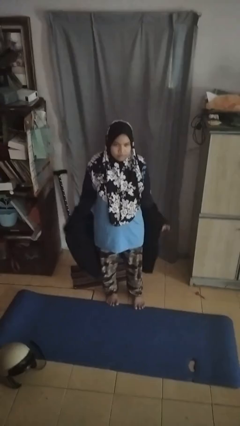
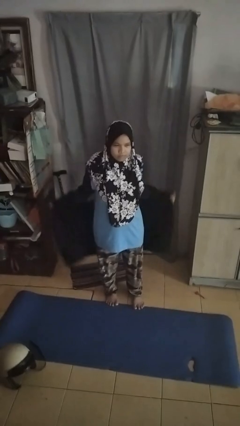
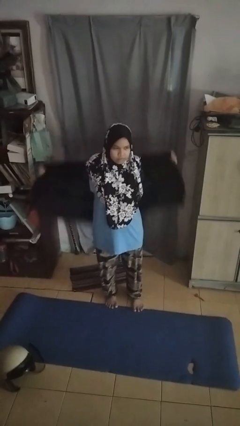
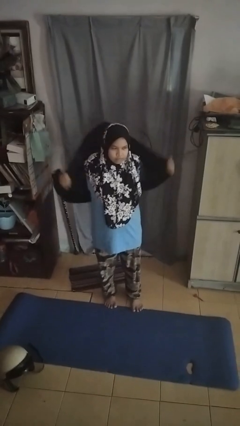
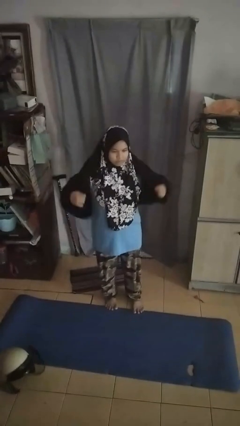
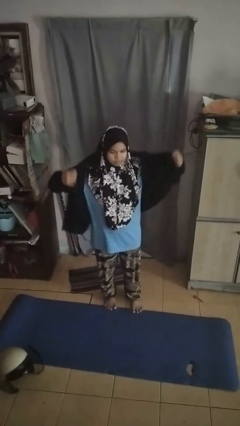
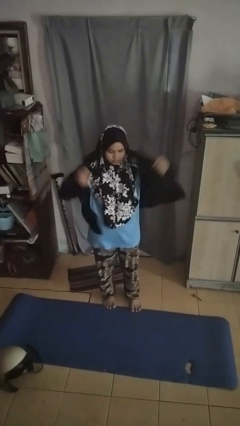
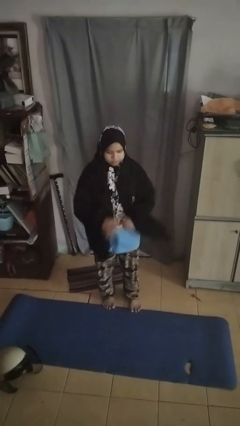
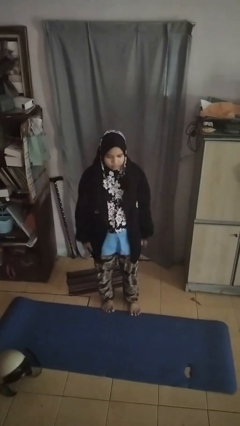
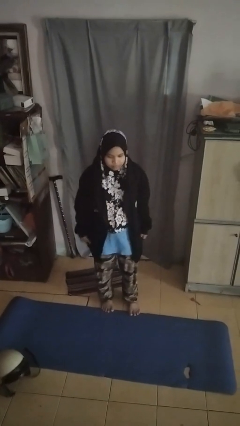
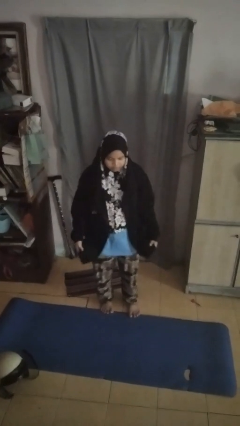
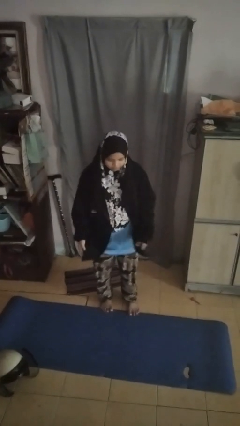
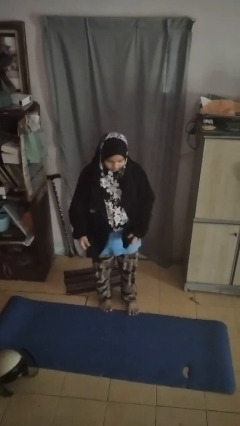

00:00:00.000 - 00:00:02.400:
person puts on jacket

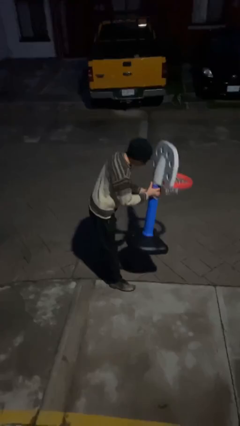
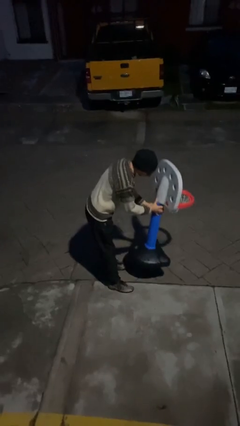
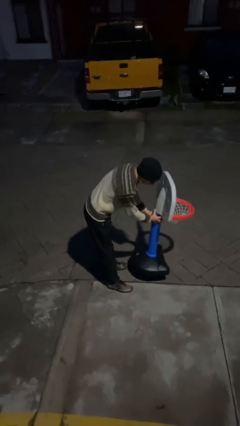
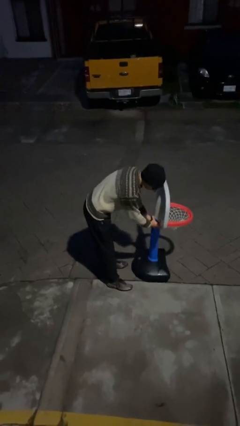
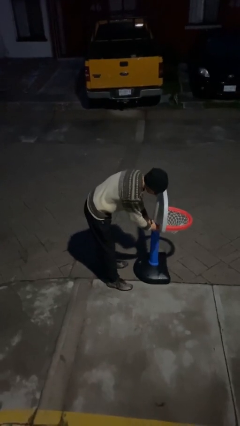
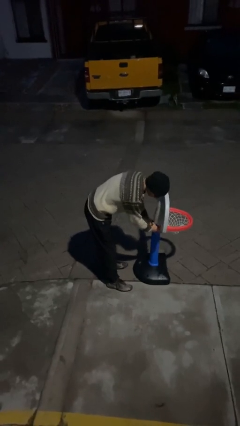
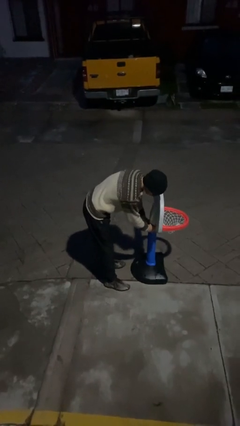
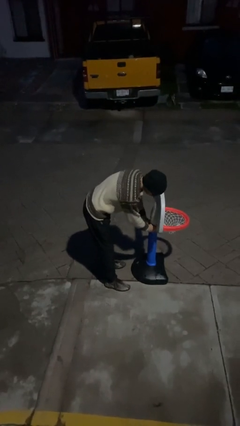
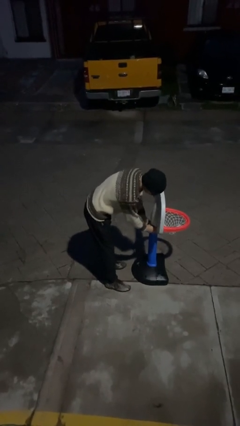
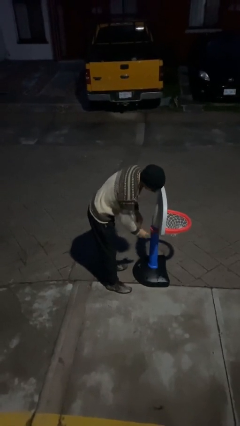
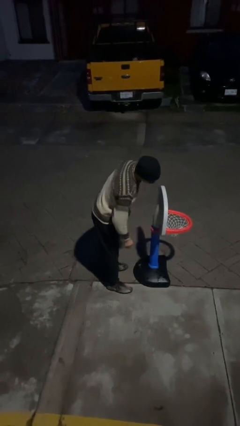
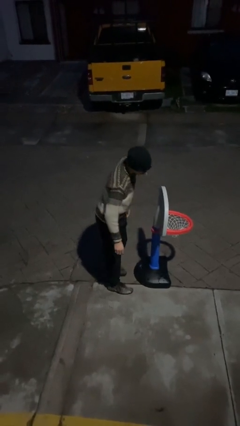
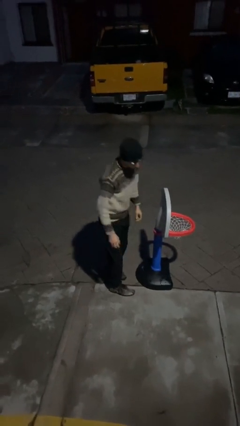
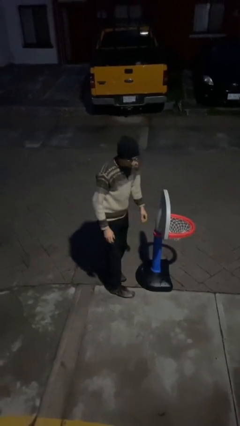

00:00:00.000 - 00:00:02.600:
person puts down object on floor

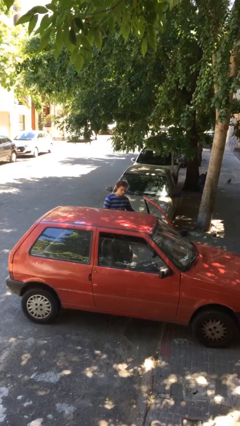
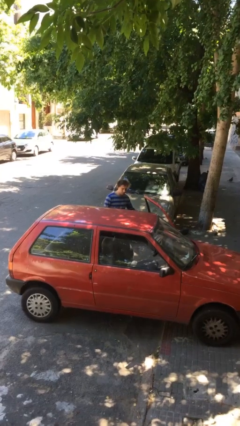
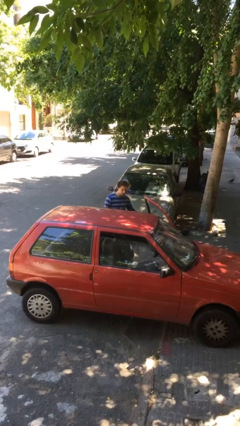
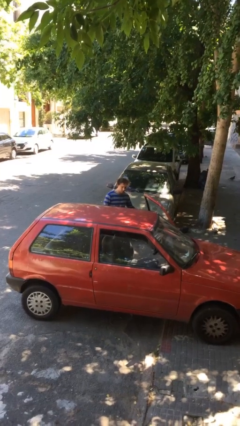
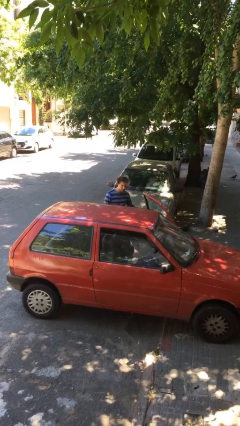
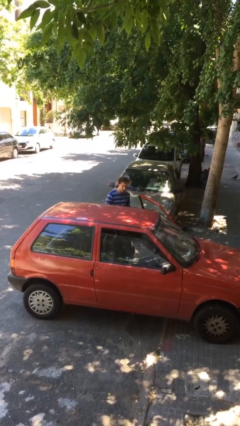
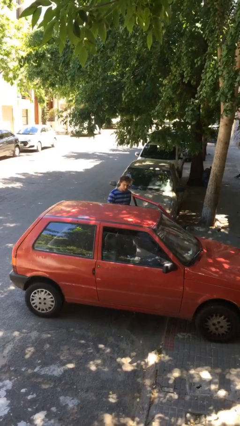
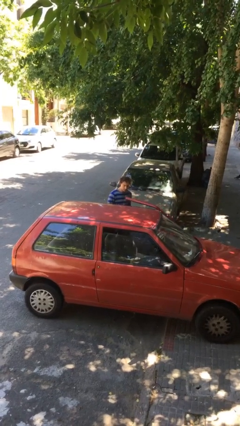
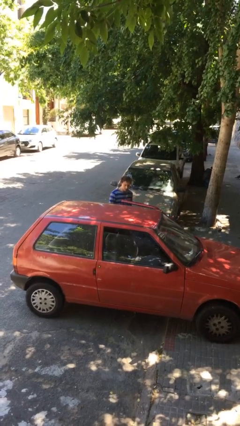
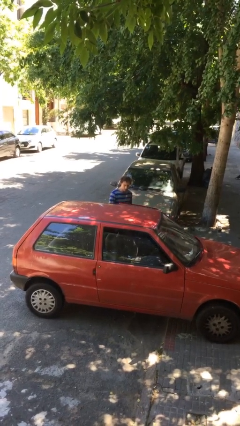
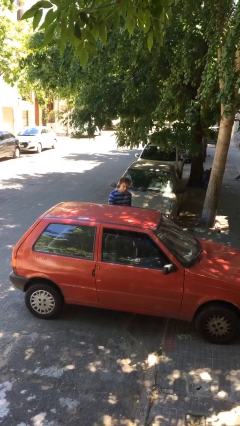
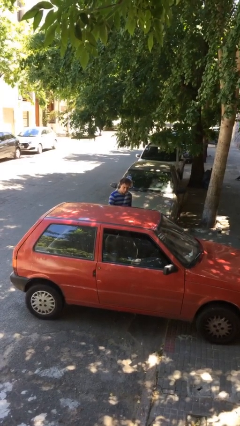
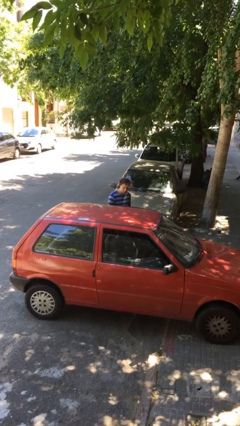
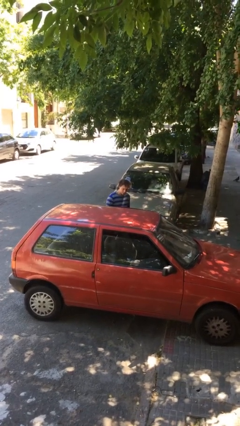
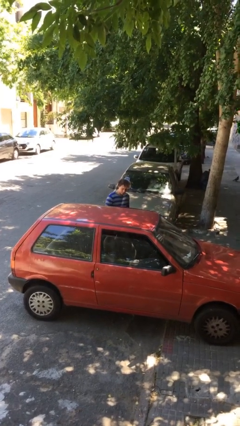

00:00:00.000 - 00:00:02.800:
person closes car door

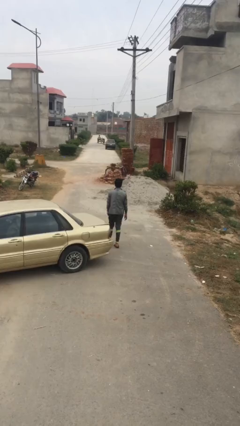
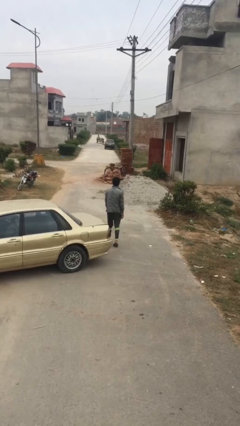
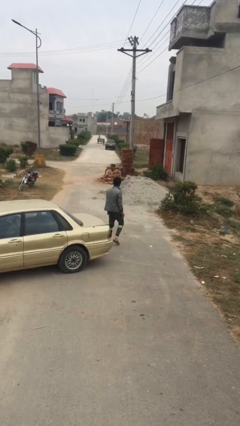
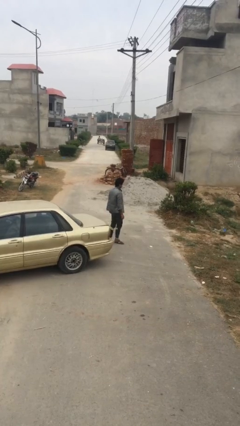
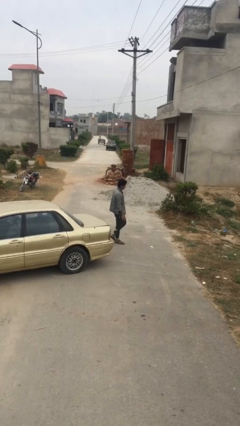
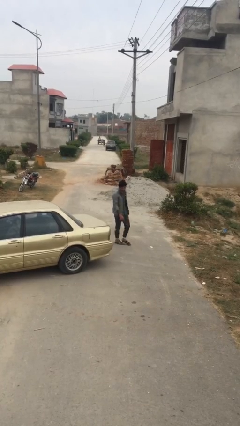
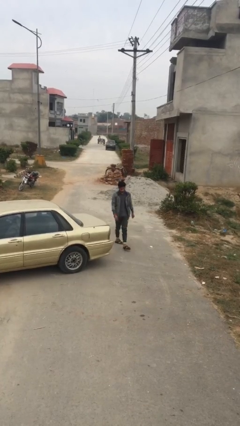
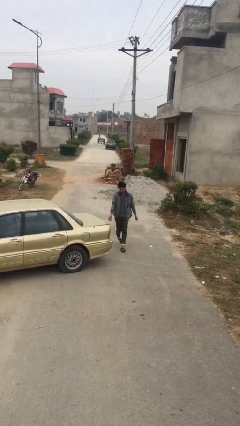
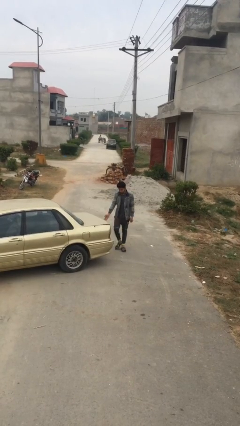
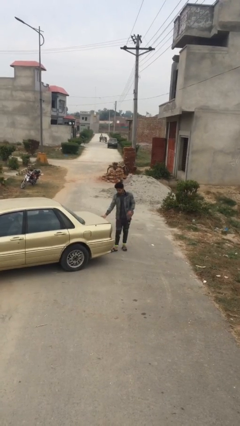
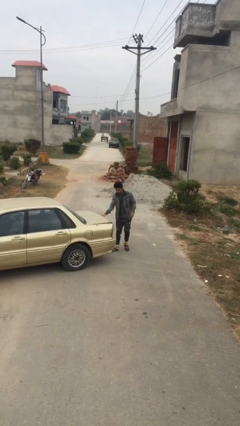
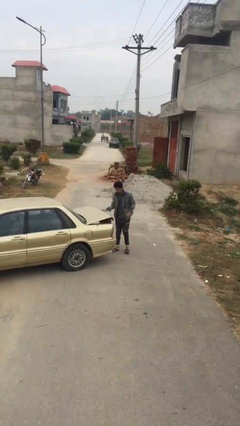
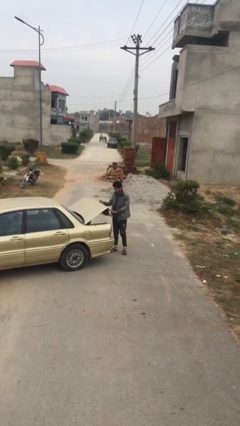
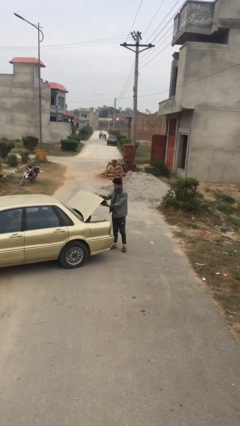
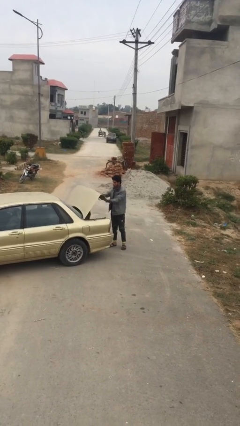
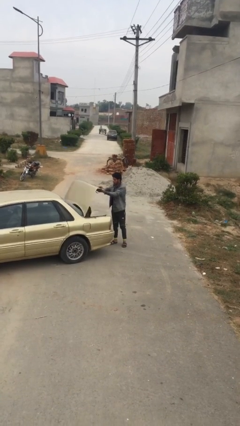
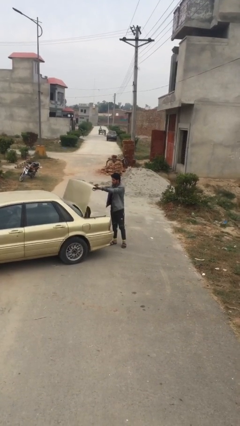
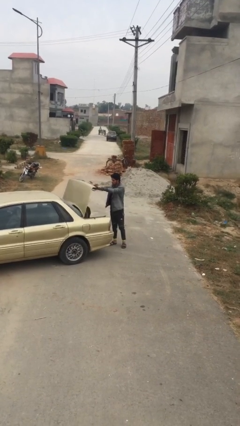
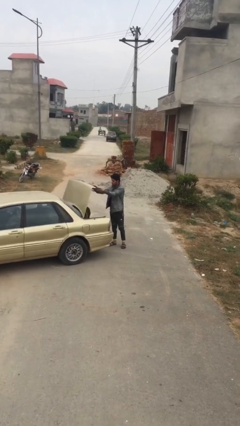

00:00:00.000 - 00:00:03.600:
person opens car trunk

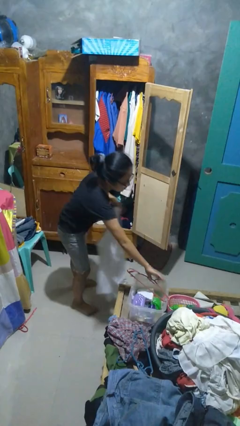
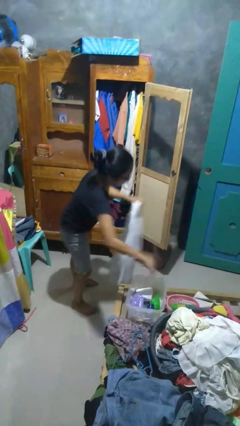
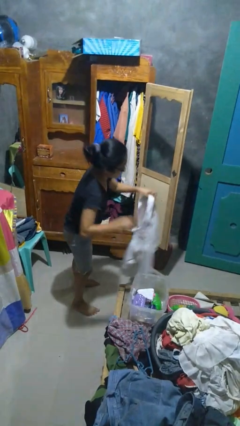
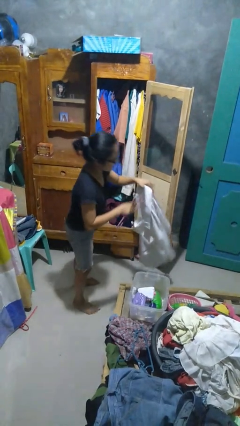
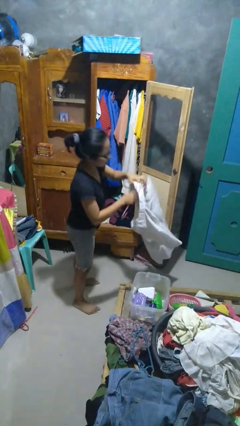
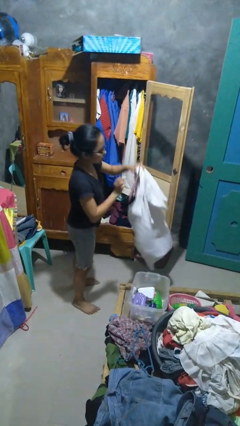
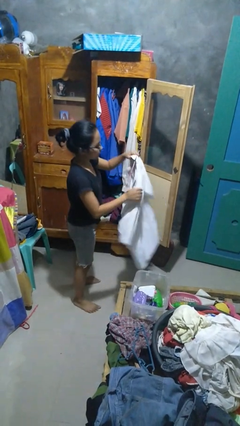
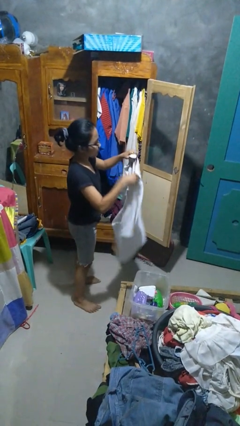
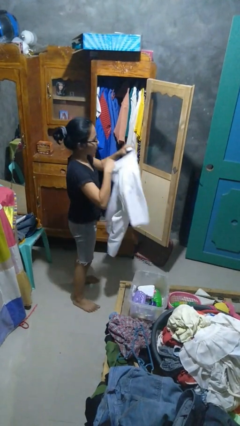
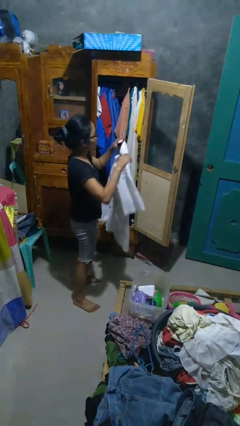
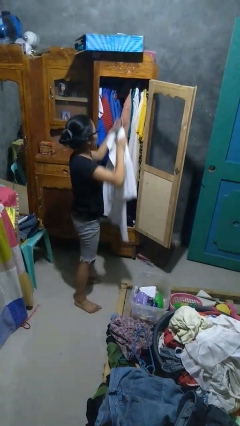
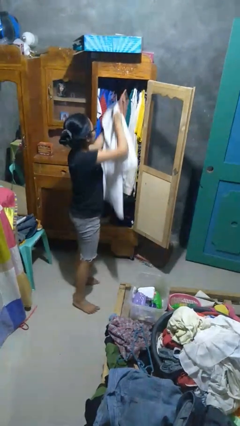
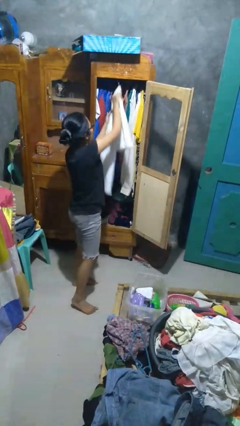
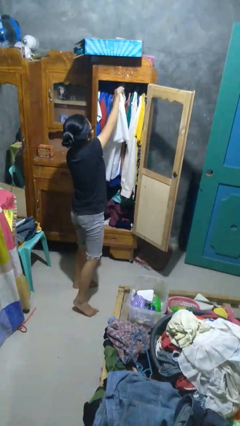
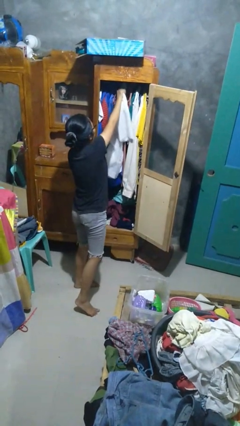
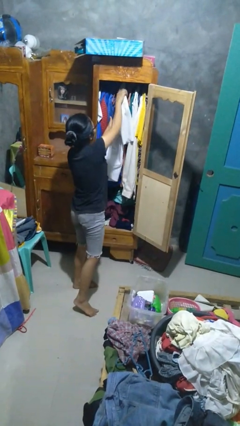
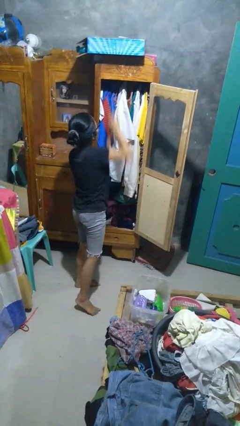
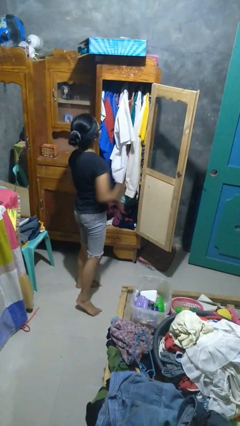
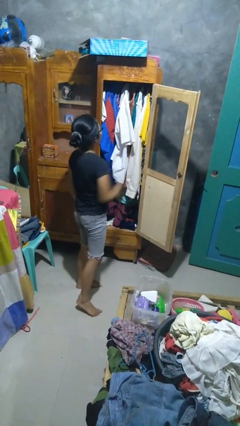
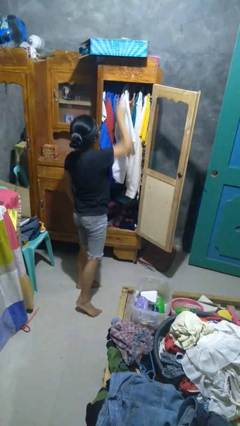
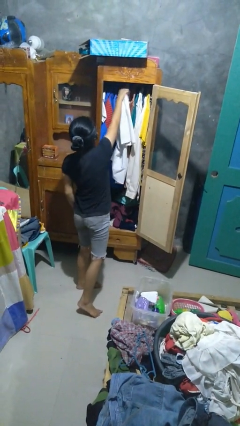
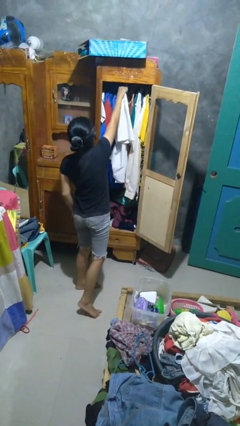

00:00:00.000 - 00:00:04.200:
person puts clothes into closet

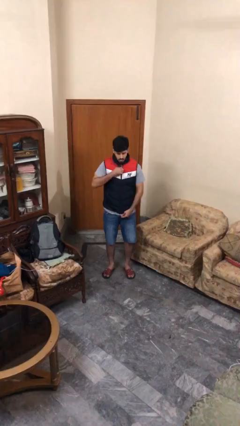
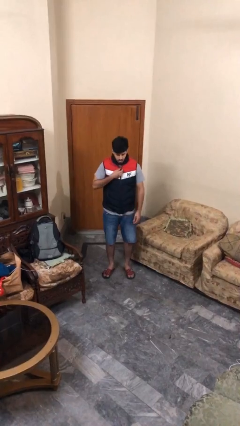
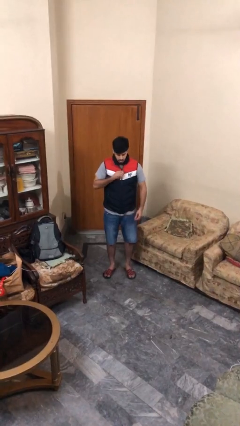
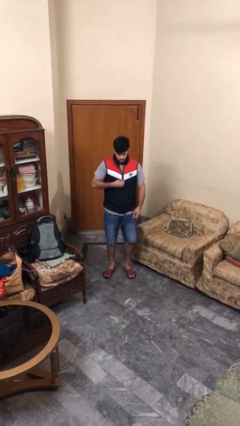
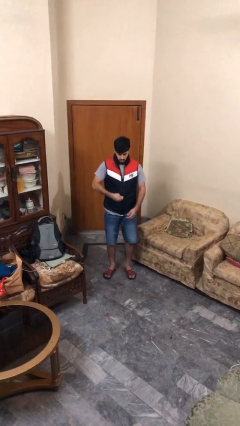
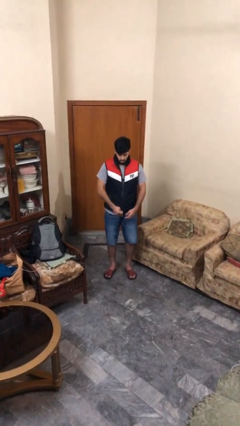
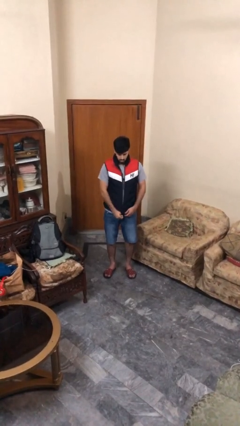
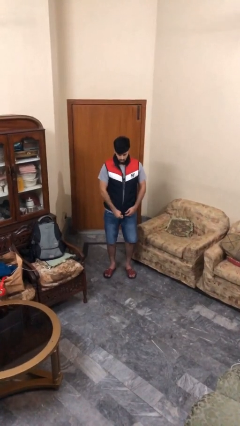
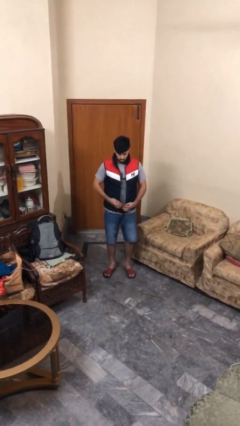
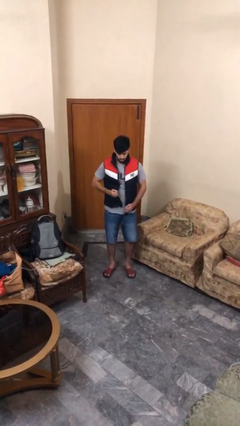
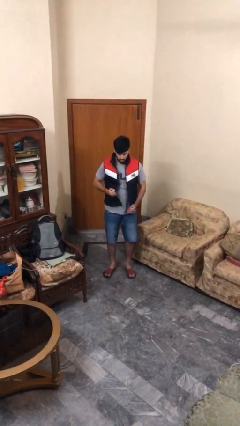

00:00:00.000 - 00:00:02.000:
person unzips jacket
